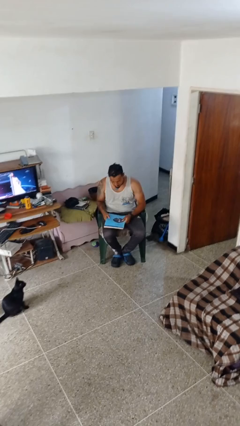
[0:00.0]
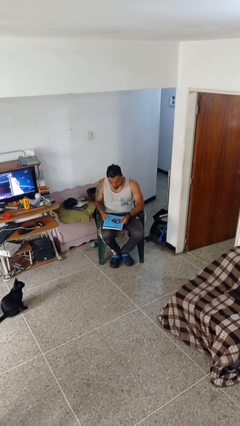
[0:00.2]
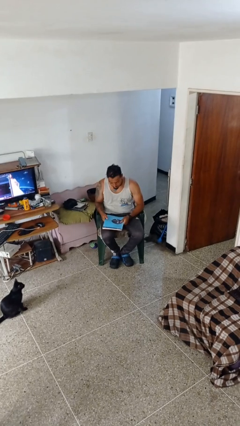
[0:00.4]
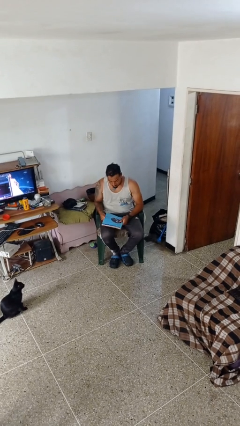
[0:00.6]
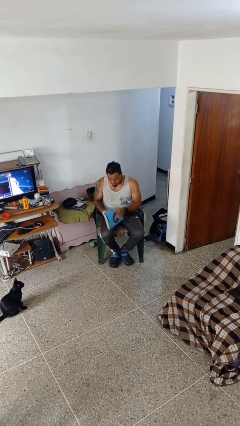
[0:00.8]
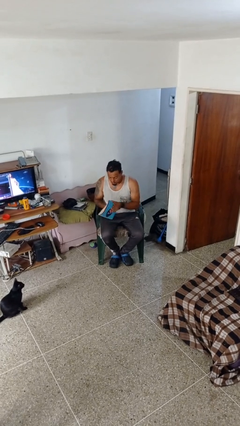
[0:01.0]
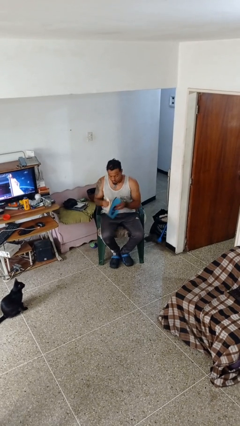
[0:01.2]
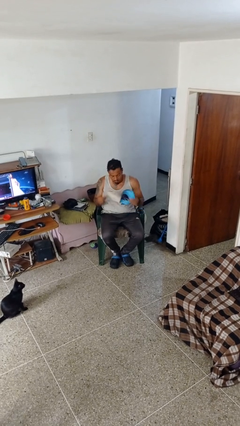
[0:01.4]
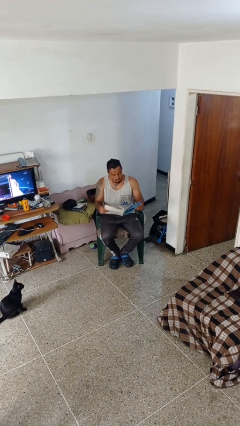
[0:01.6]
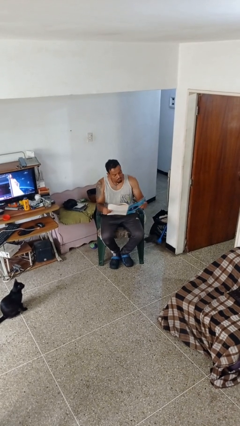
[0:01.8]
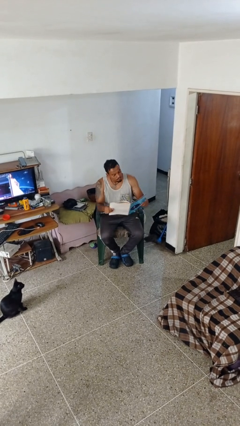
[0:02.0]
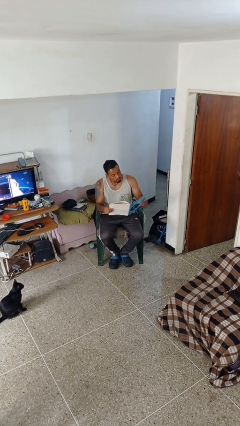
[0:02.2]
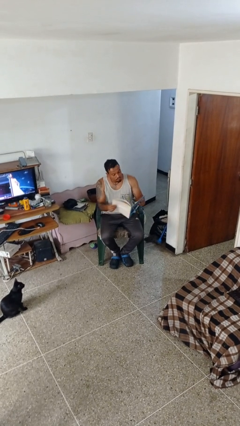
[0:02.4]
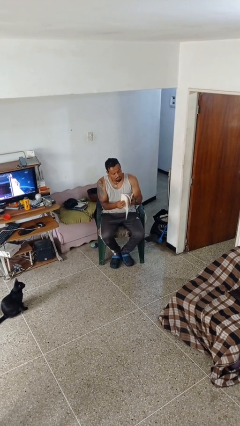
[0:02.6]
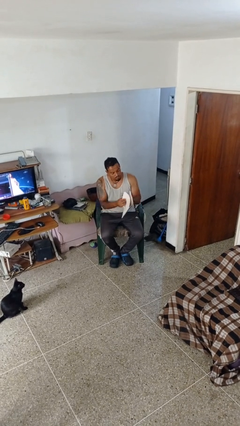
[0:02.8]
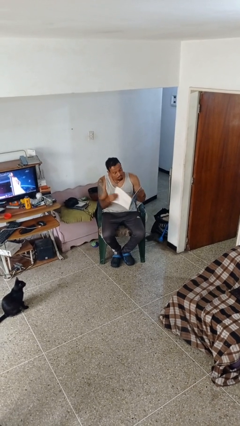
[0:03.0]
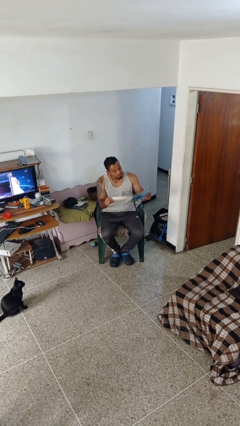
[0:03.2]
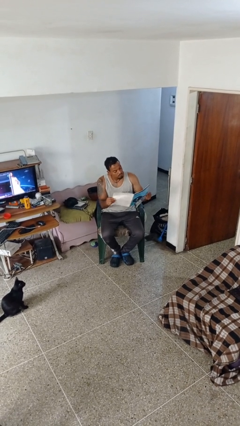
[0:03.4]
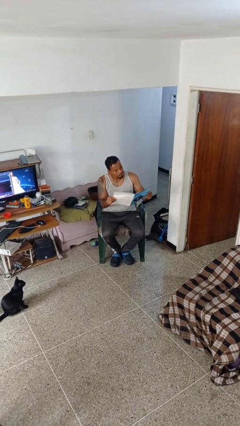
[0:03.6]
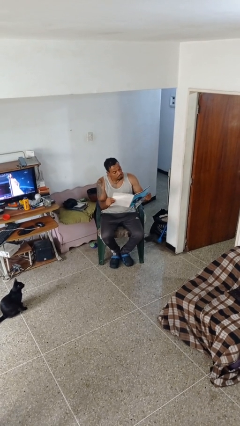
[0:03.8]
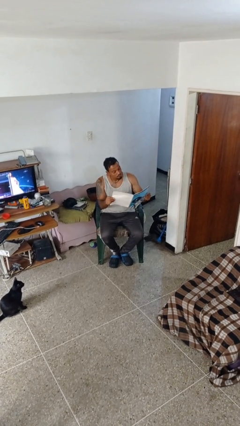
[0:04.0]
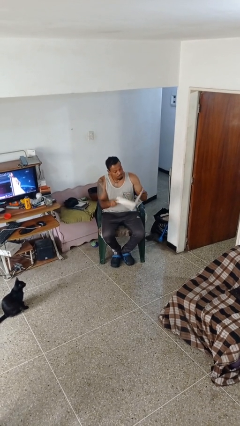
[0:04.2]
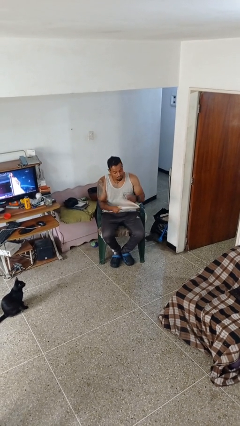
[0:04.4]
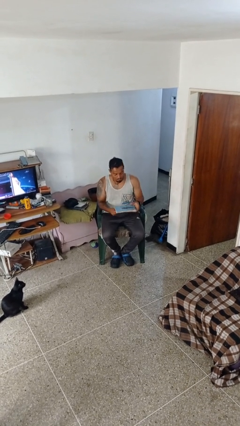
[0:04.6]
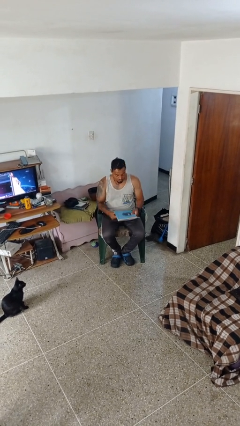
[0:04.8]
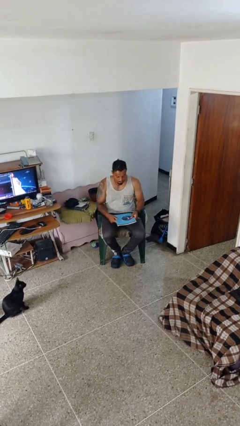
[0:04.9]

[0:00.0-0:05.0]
person reads magazine

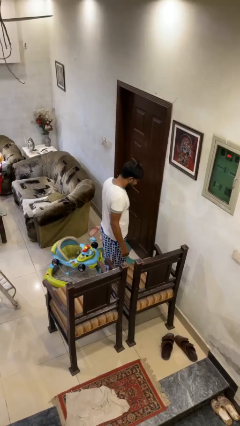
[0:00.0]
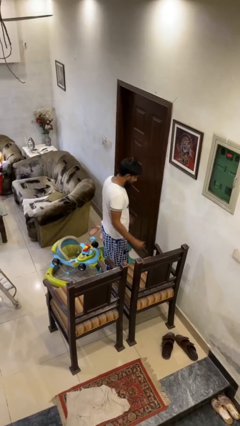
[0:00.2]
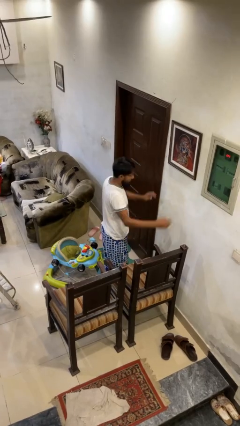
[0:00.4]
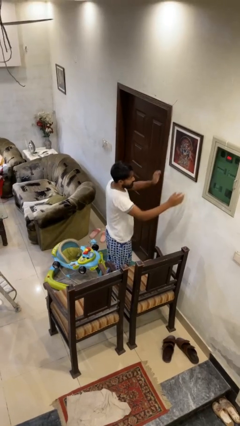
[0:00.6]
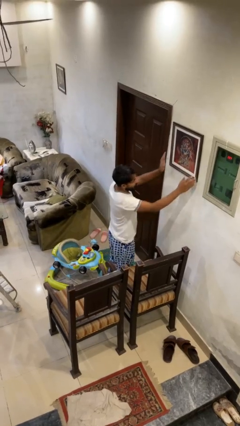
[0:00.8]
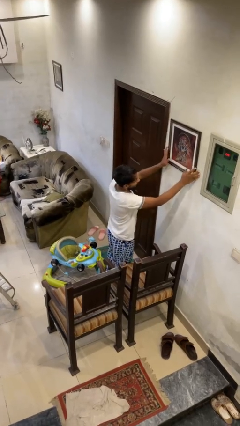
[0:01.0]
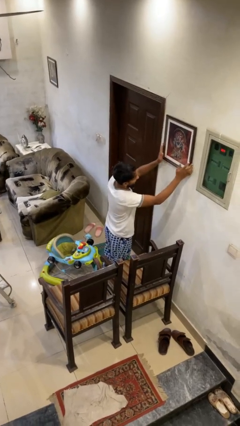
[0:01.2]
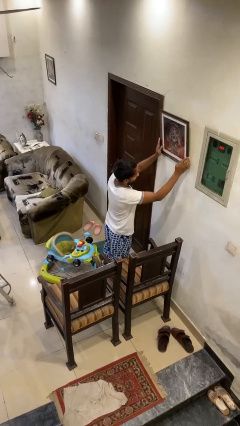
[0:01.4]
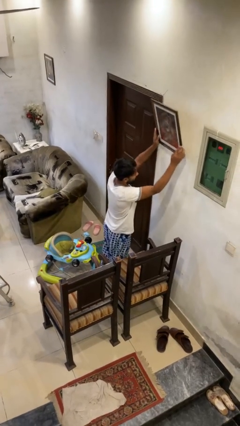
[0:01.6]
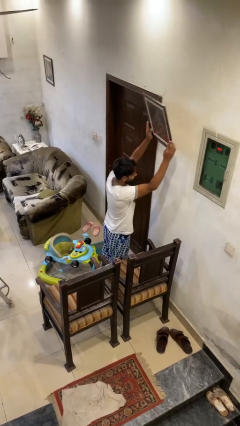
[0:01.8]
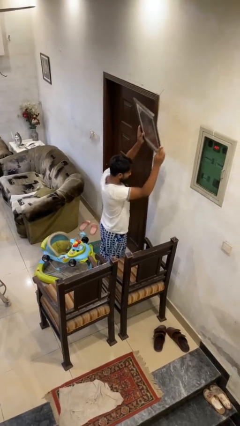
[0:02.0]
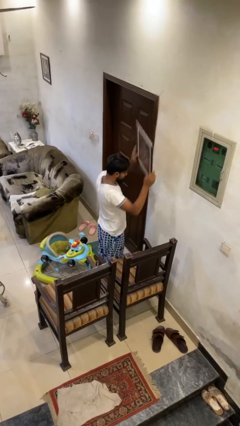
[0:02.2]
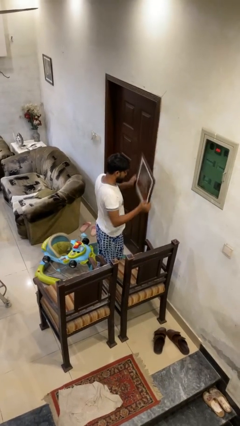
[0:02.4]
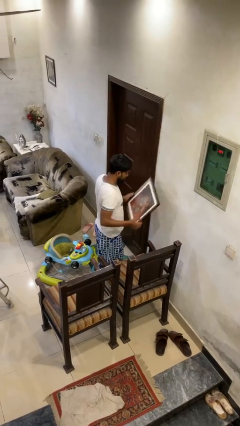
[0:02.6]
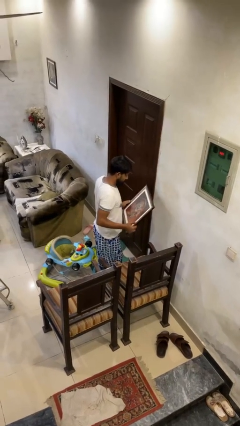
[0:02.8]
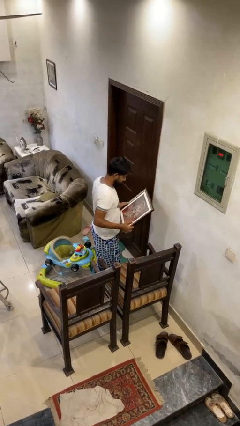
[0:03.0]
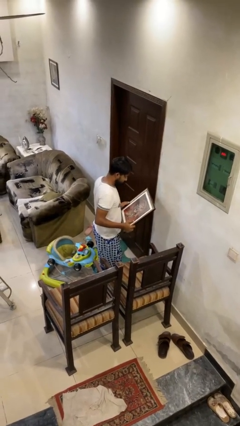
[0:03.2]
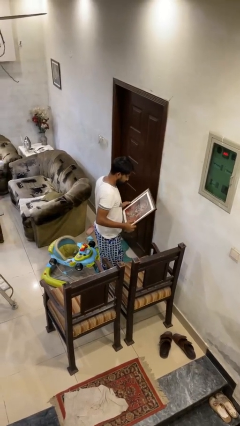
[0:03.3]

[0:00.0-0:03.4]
person takes down picture frame

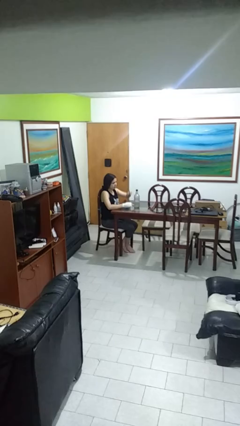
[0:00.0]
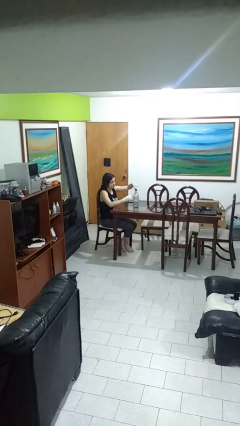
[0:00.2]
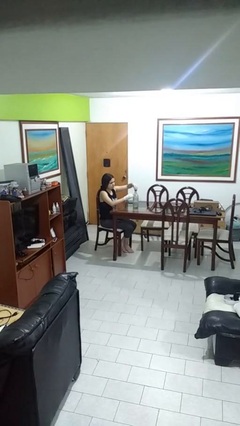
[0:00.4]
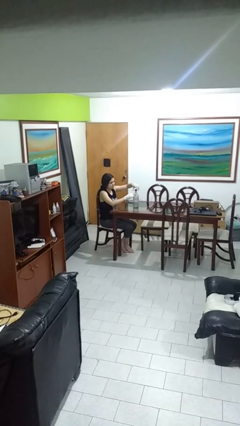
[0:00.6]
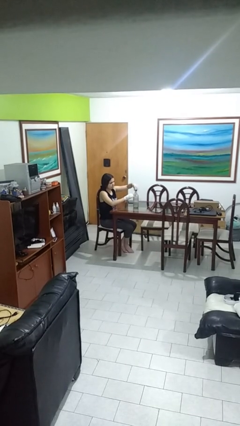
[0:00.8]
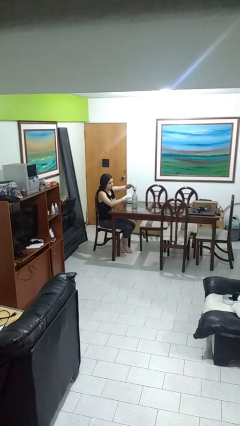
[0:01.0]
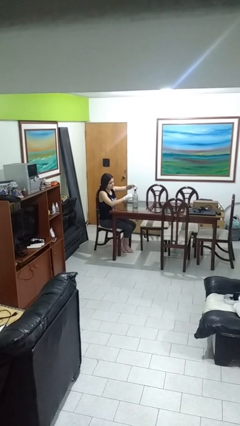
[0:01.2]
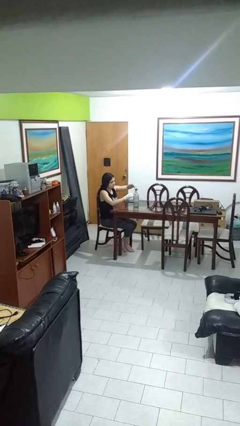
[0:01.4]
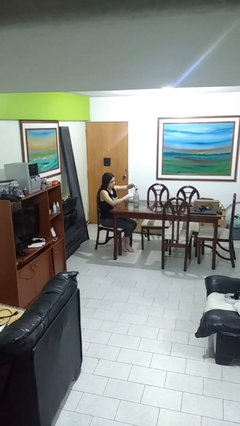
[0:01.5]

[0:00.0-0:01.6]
person unscrews lid from bottle

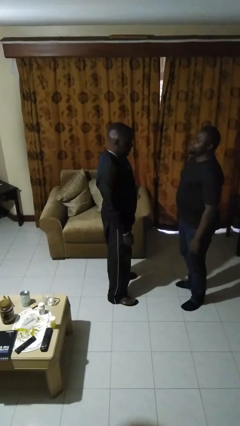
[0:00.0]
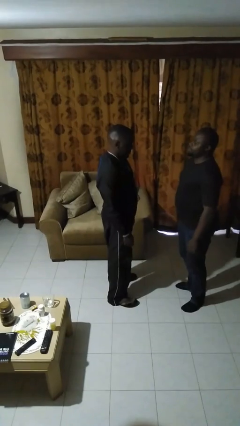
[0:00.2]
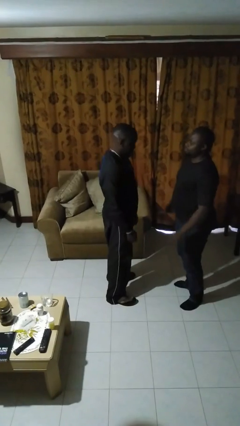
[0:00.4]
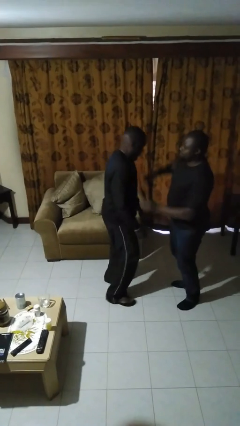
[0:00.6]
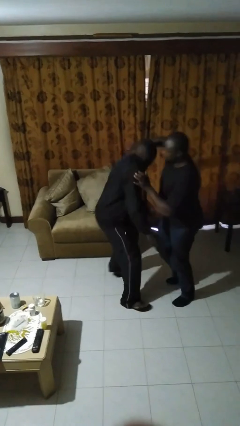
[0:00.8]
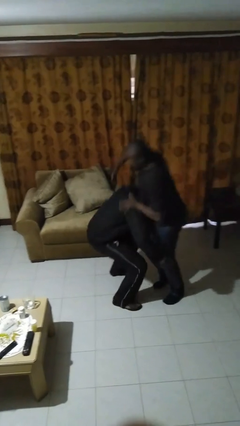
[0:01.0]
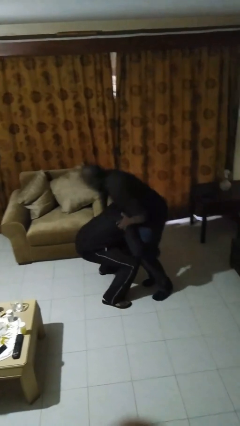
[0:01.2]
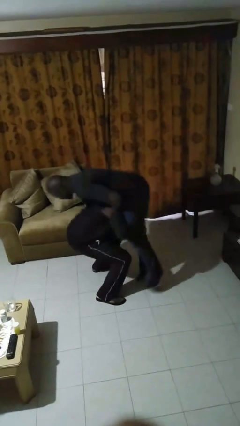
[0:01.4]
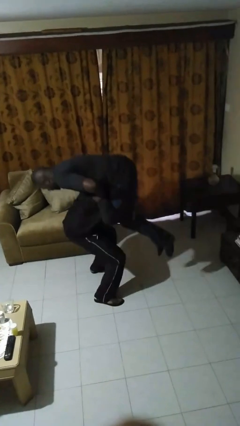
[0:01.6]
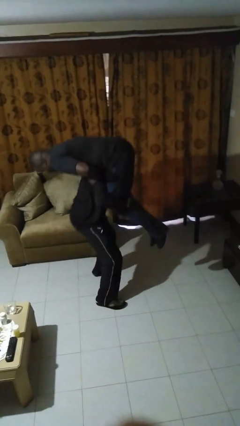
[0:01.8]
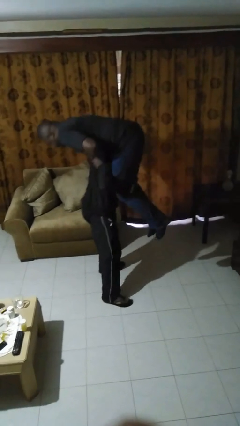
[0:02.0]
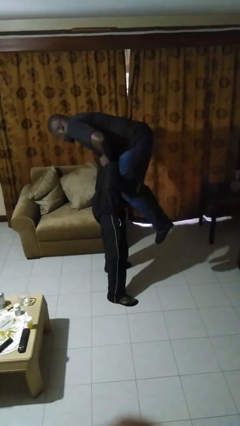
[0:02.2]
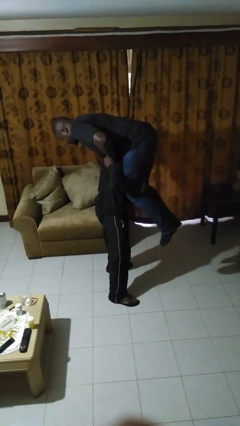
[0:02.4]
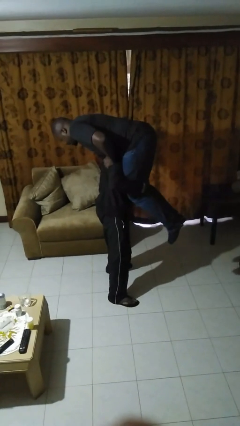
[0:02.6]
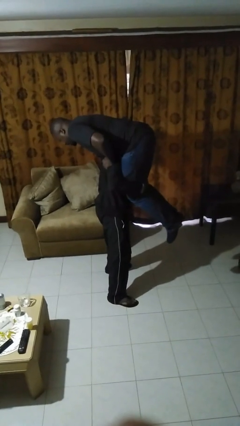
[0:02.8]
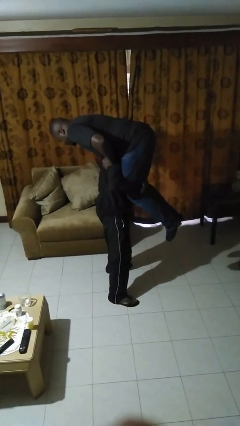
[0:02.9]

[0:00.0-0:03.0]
person carries person over shoulder

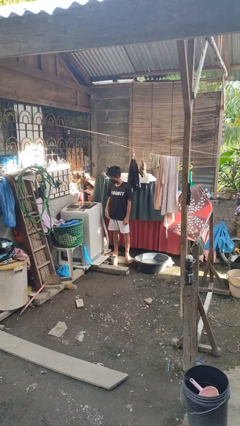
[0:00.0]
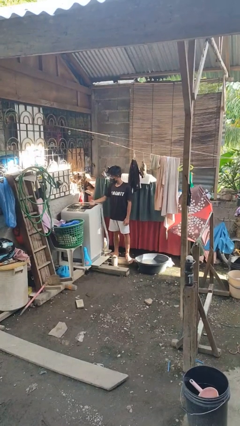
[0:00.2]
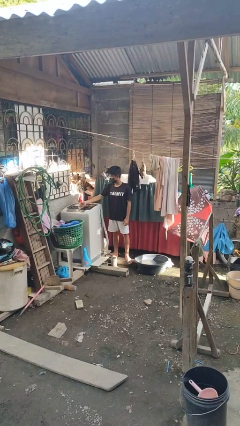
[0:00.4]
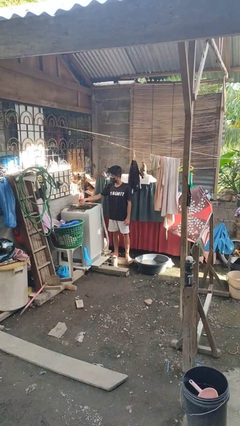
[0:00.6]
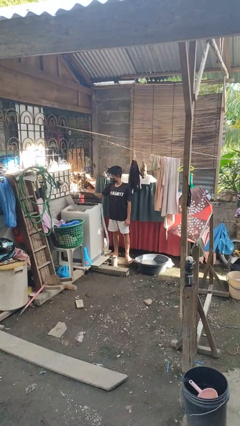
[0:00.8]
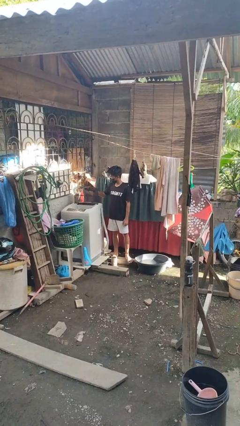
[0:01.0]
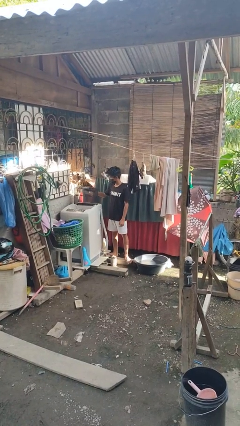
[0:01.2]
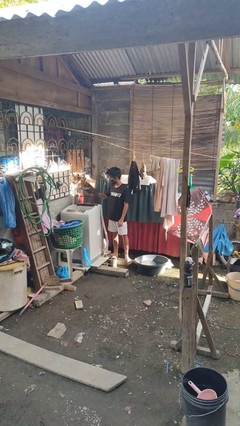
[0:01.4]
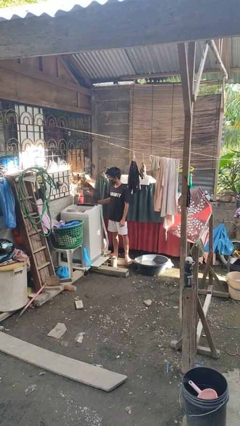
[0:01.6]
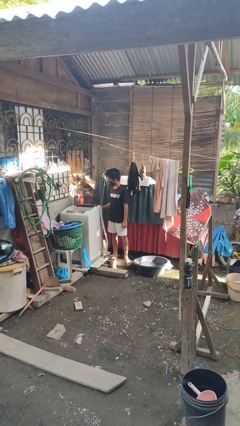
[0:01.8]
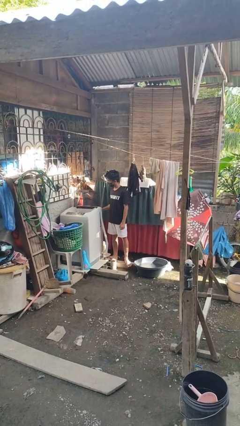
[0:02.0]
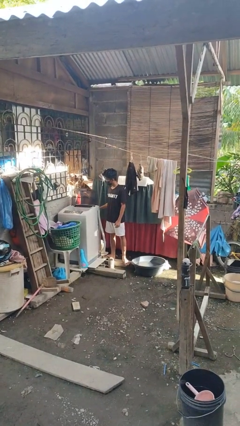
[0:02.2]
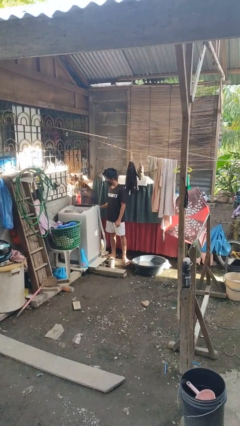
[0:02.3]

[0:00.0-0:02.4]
person opens clothes washer

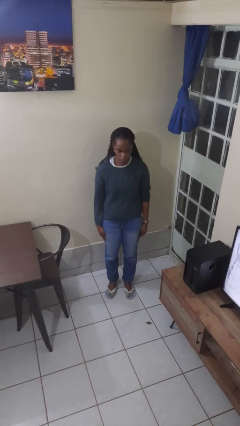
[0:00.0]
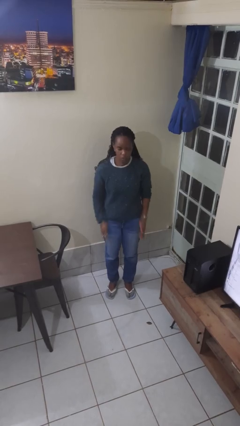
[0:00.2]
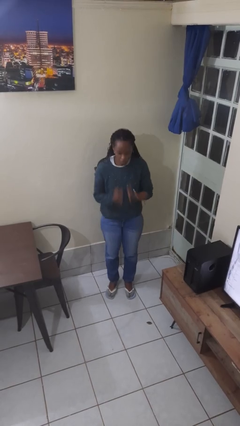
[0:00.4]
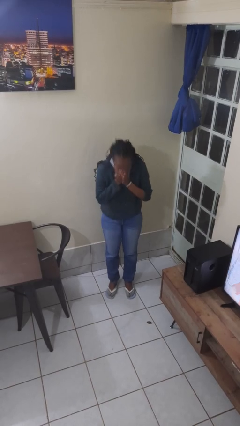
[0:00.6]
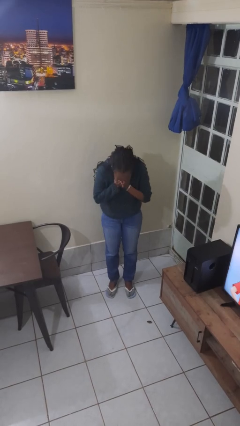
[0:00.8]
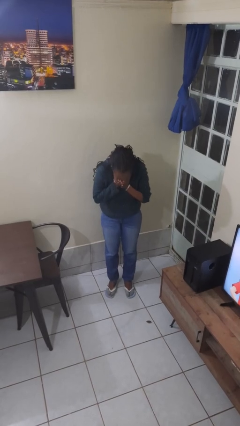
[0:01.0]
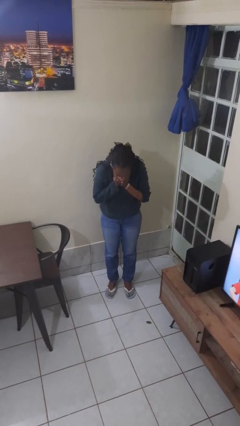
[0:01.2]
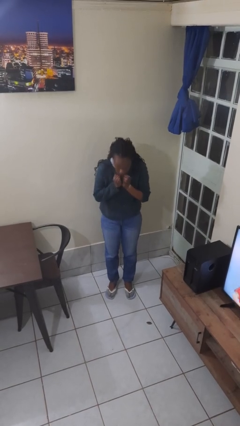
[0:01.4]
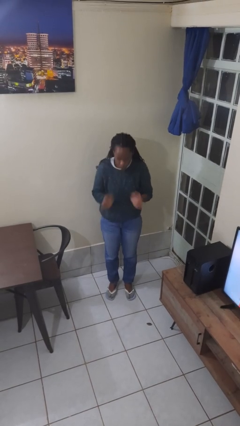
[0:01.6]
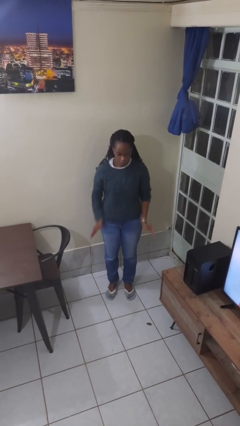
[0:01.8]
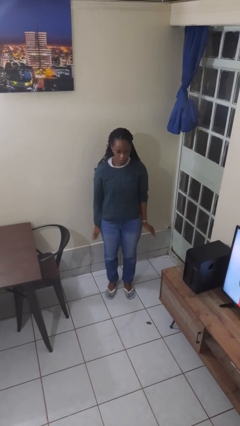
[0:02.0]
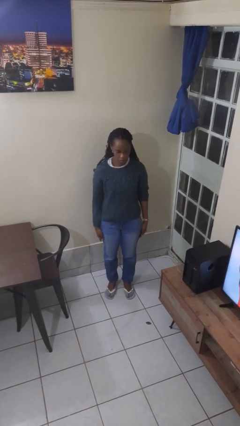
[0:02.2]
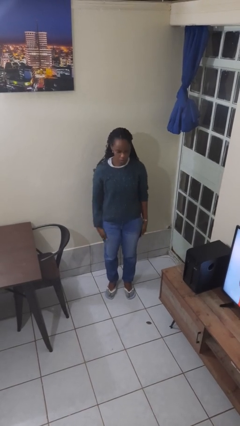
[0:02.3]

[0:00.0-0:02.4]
person sneezes into hand
